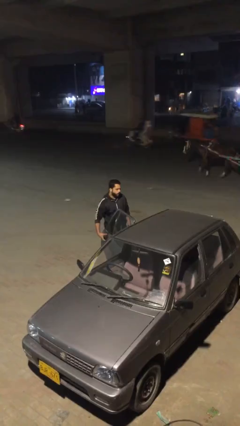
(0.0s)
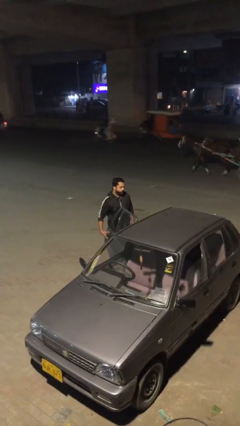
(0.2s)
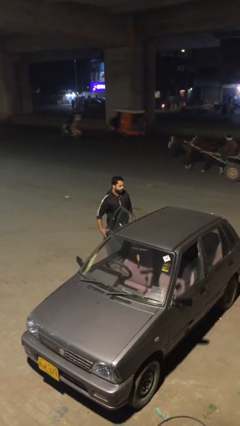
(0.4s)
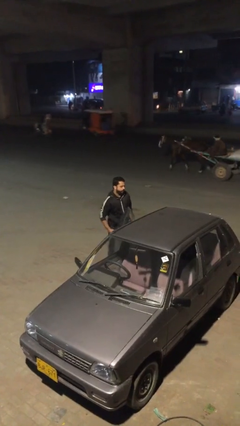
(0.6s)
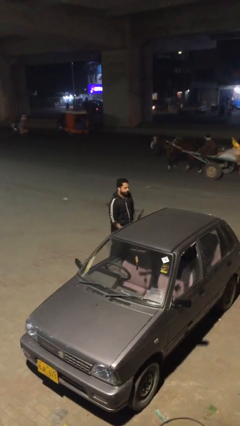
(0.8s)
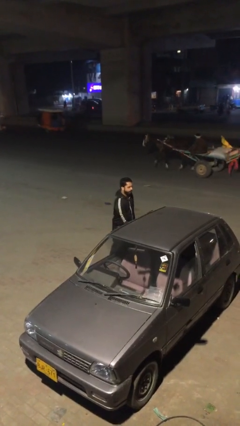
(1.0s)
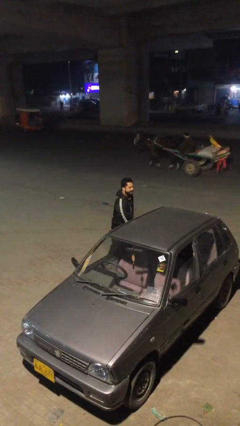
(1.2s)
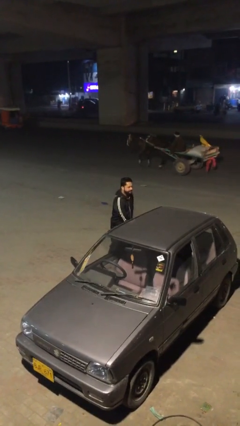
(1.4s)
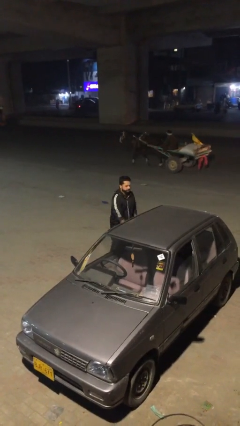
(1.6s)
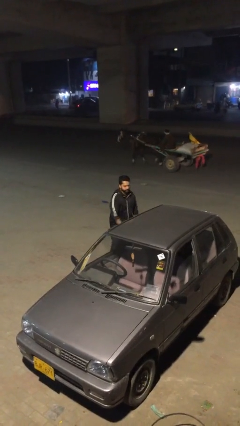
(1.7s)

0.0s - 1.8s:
person closes car door

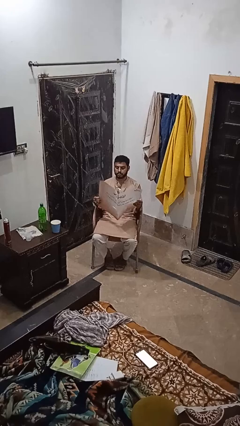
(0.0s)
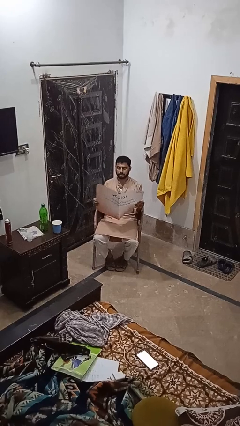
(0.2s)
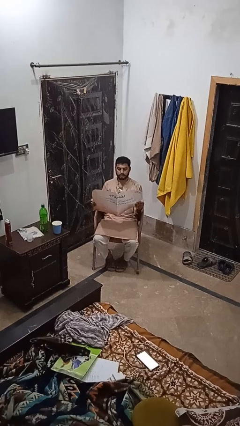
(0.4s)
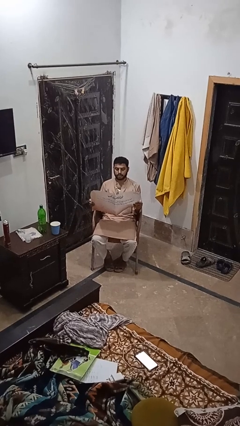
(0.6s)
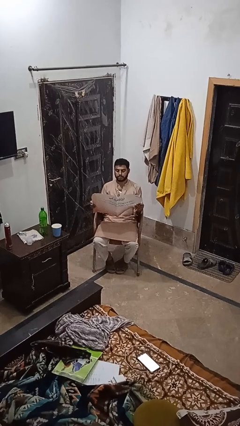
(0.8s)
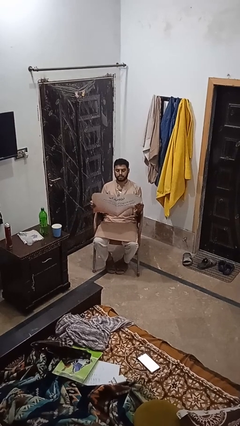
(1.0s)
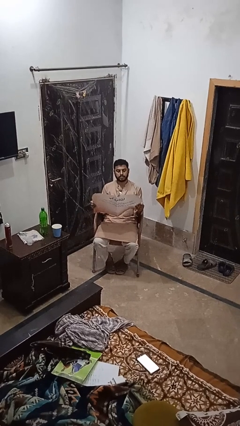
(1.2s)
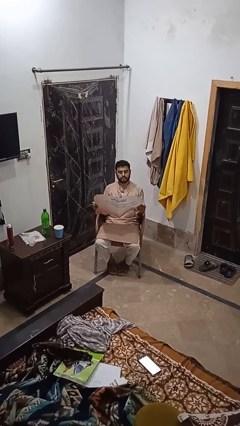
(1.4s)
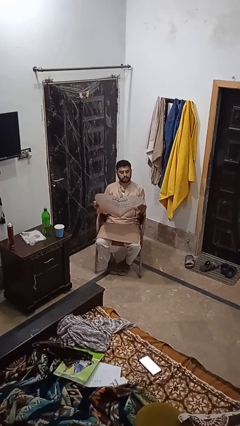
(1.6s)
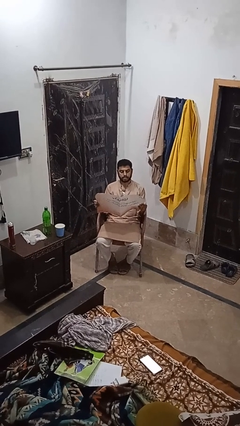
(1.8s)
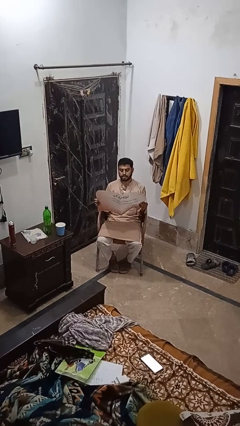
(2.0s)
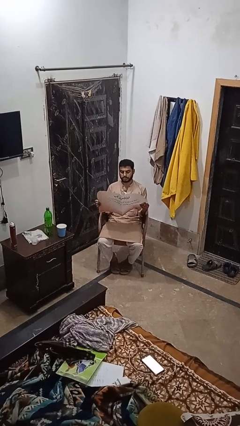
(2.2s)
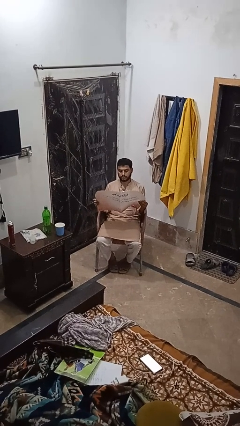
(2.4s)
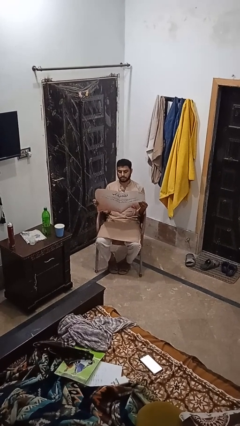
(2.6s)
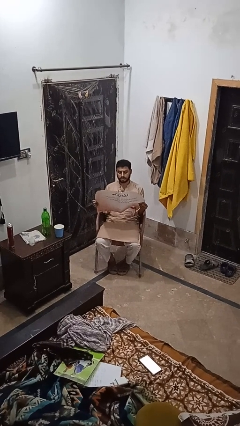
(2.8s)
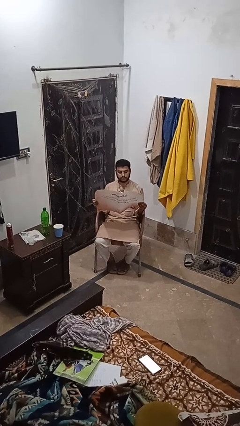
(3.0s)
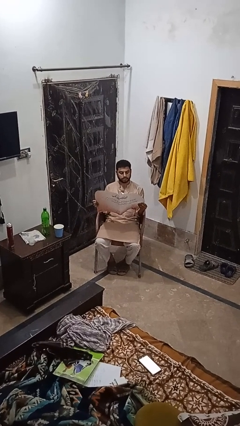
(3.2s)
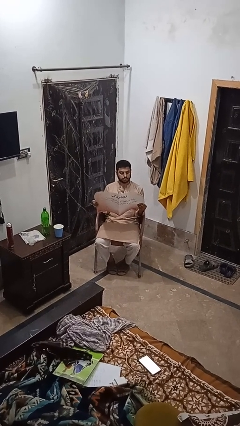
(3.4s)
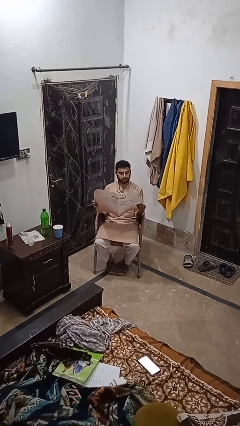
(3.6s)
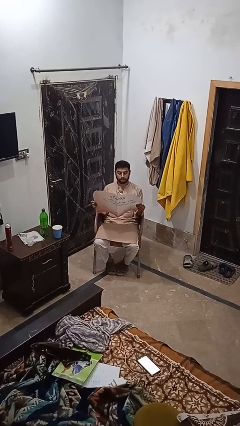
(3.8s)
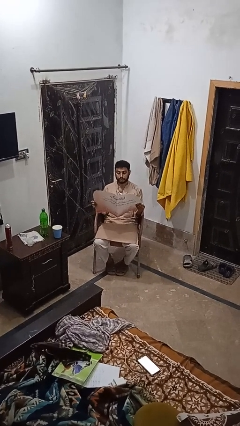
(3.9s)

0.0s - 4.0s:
person reads newspaper

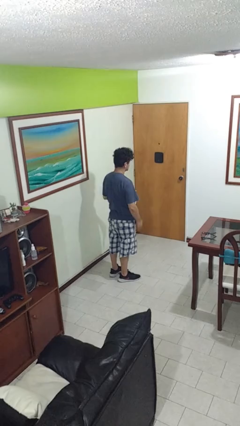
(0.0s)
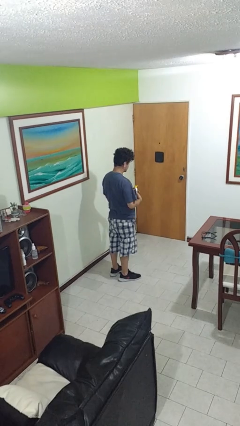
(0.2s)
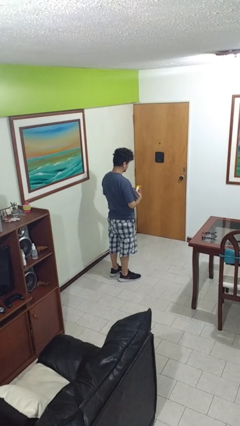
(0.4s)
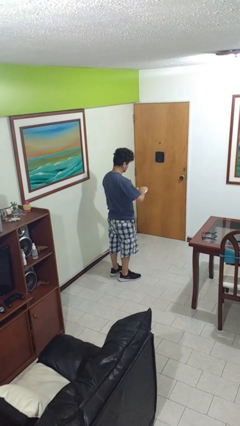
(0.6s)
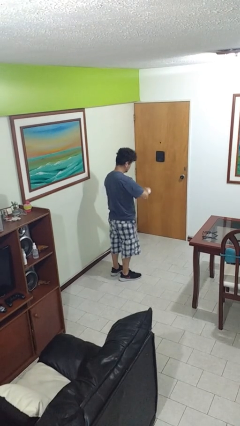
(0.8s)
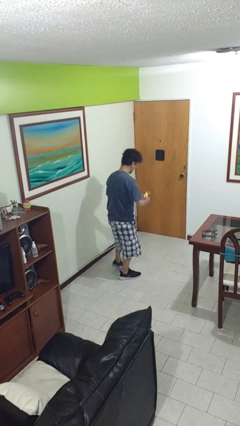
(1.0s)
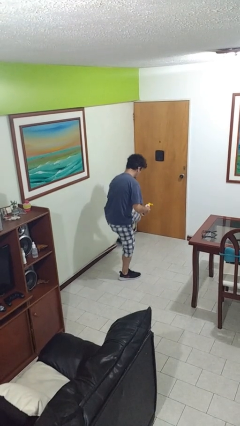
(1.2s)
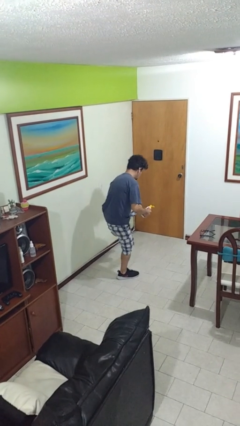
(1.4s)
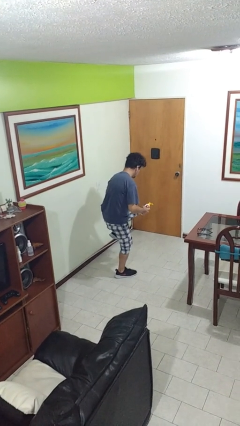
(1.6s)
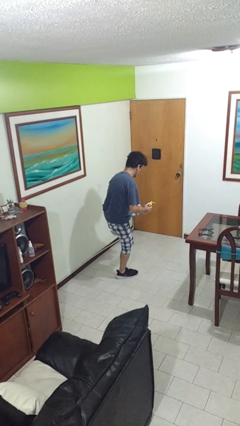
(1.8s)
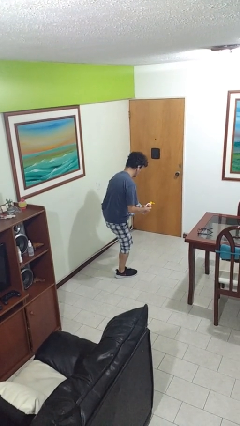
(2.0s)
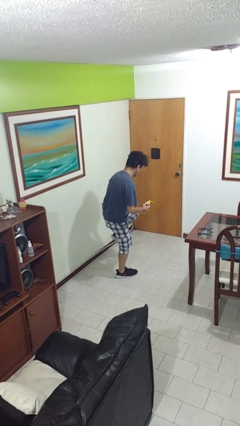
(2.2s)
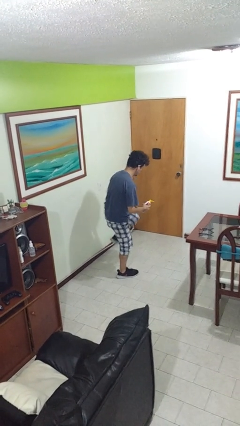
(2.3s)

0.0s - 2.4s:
person applies sunscreen

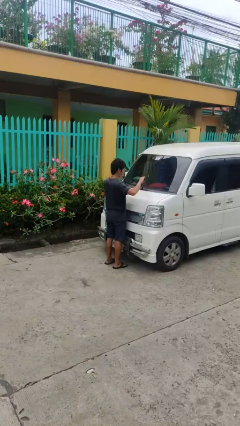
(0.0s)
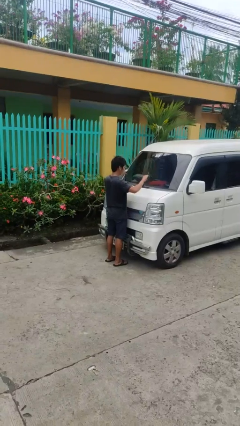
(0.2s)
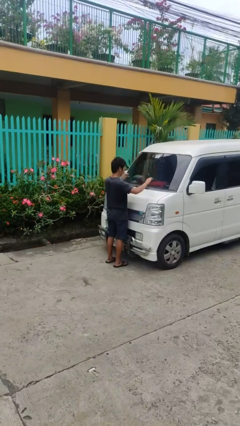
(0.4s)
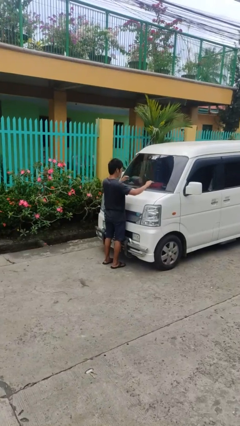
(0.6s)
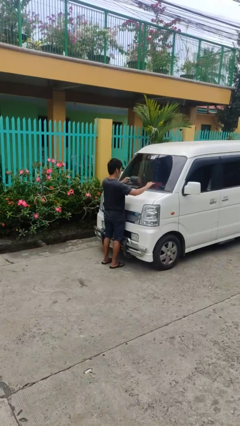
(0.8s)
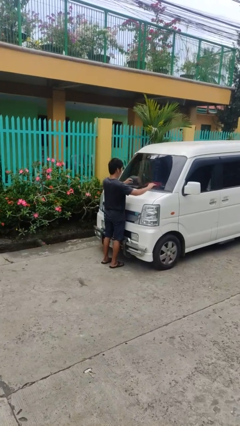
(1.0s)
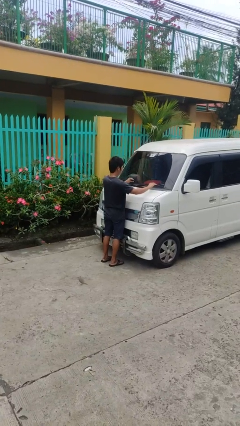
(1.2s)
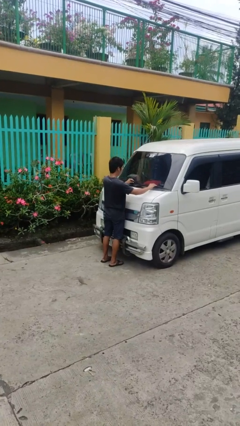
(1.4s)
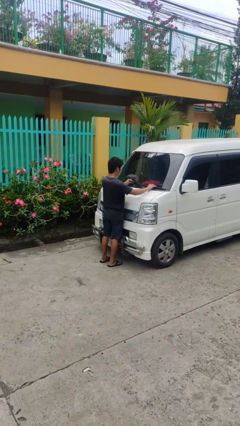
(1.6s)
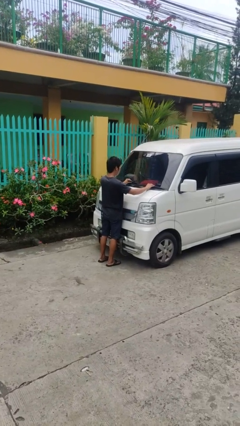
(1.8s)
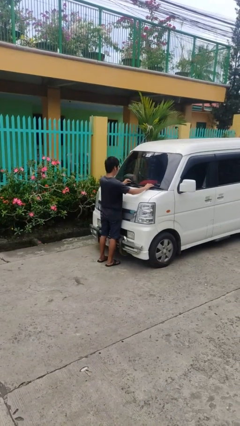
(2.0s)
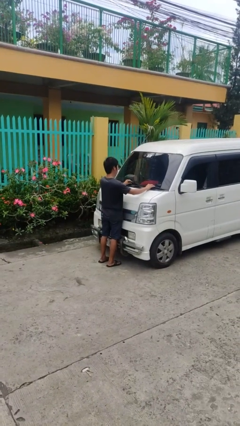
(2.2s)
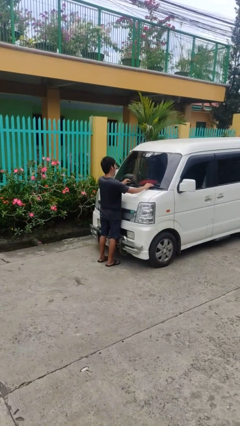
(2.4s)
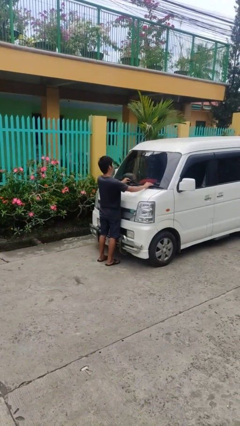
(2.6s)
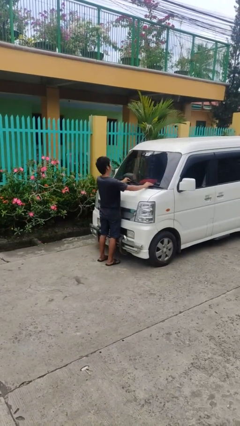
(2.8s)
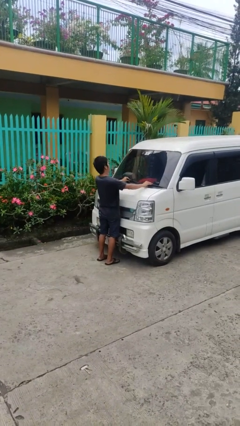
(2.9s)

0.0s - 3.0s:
person flips down car wipers

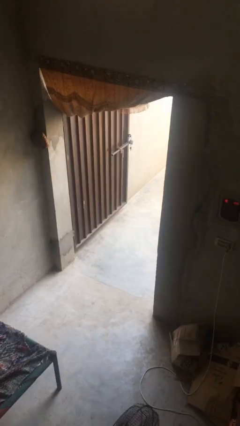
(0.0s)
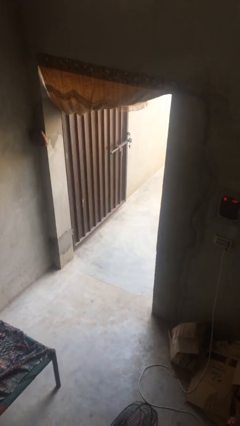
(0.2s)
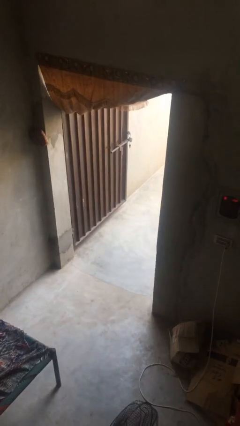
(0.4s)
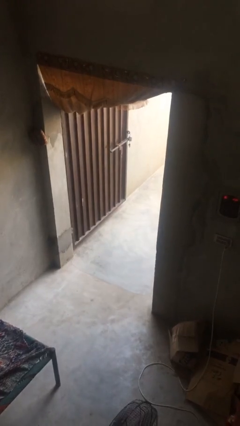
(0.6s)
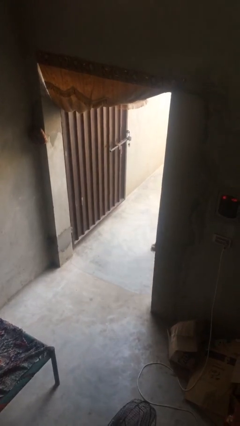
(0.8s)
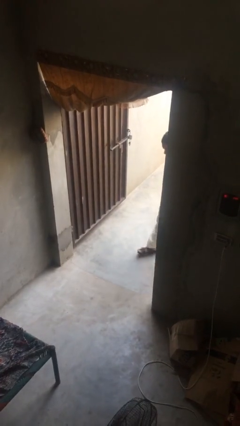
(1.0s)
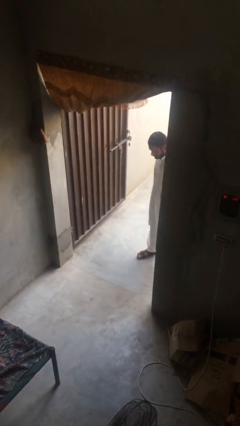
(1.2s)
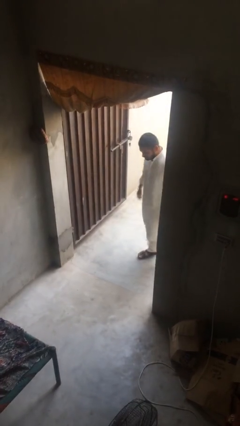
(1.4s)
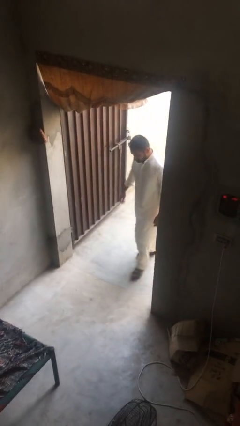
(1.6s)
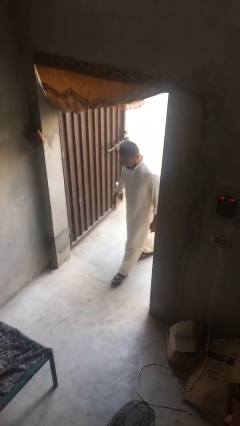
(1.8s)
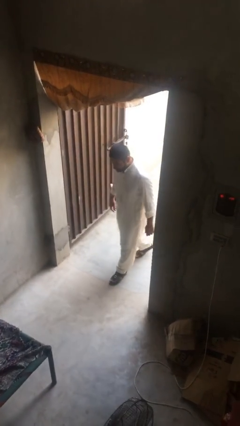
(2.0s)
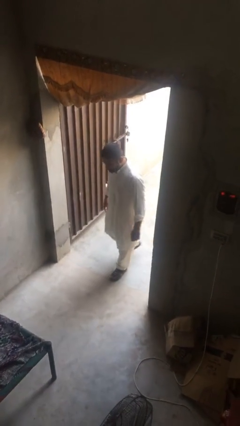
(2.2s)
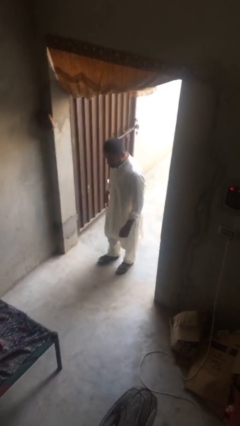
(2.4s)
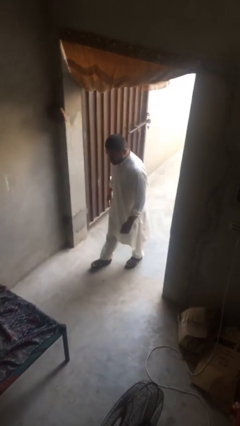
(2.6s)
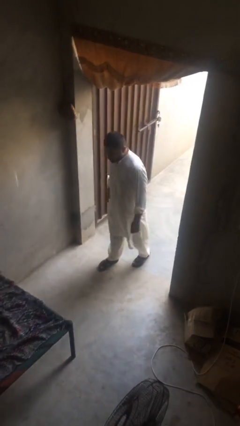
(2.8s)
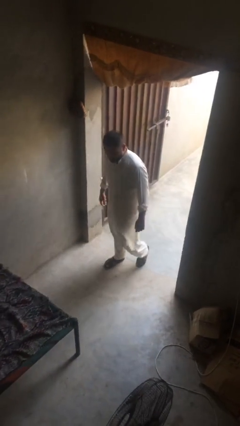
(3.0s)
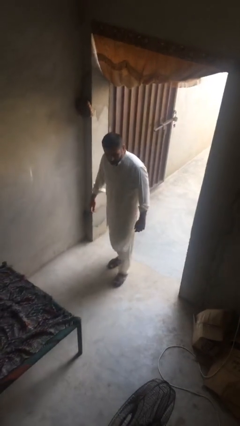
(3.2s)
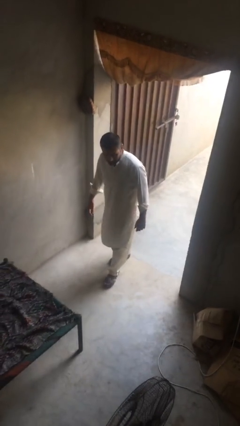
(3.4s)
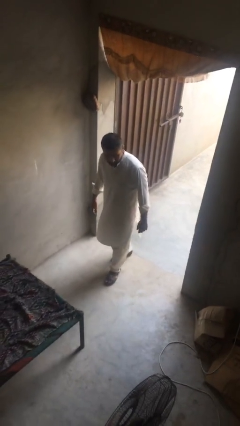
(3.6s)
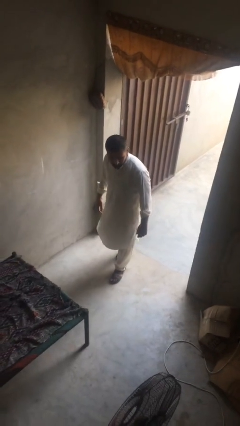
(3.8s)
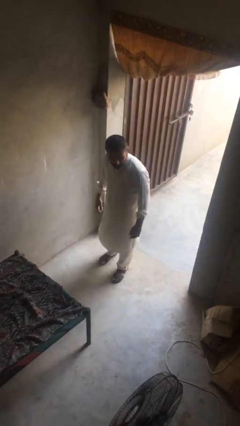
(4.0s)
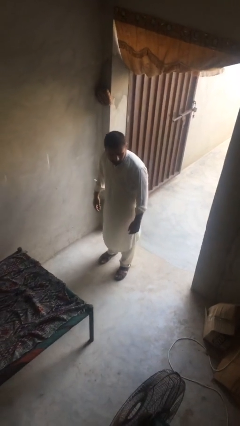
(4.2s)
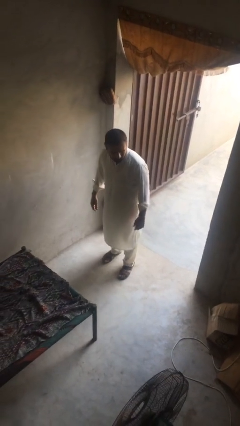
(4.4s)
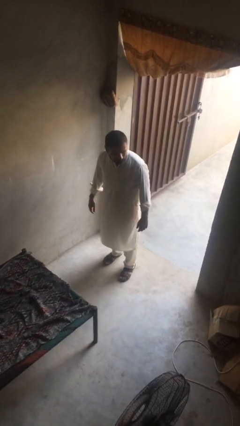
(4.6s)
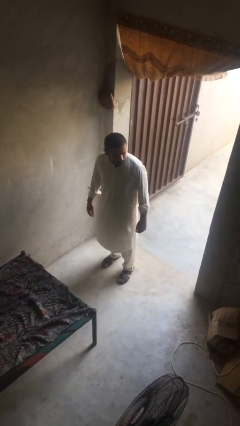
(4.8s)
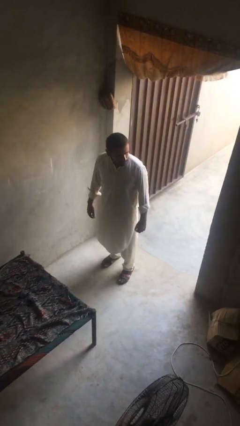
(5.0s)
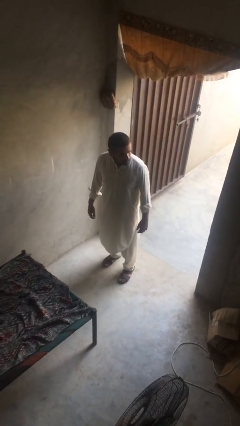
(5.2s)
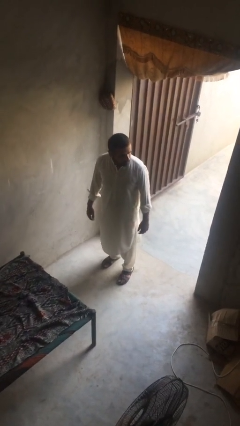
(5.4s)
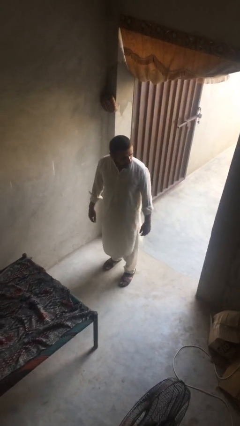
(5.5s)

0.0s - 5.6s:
person enters scene through structure

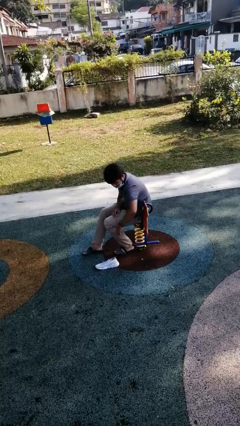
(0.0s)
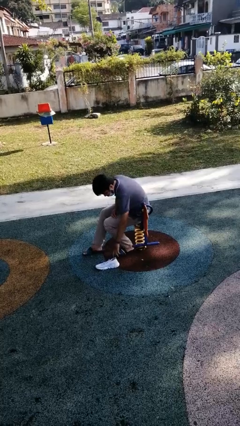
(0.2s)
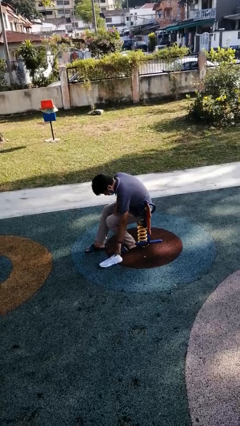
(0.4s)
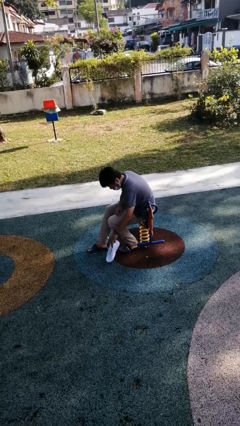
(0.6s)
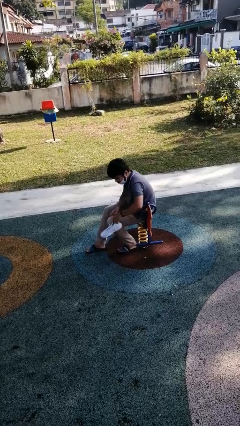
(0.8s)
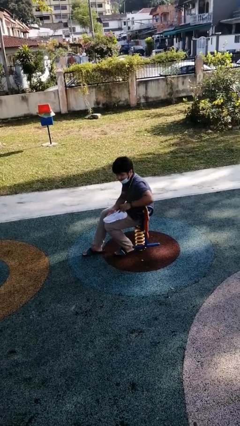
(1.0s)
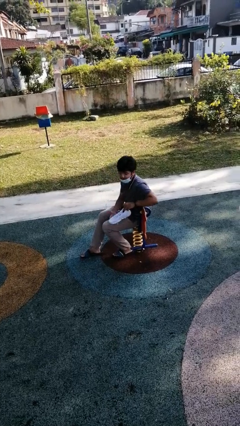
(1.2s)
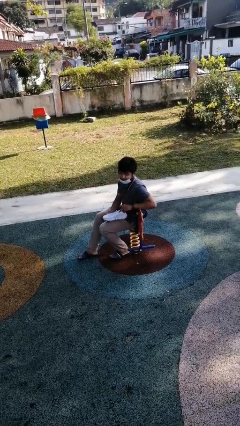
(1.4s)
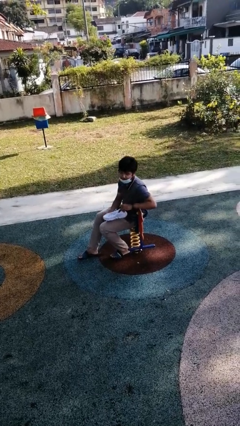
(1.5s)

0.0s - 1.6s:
person picks up object from floor
